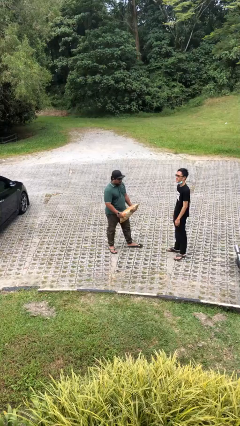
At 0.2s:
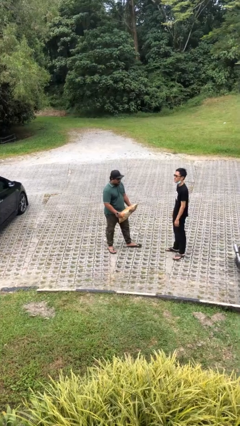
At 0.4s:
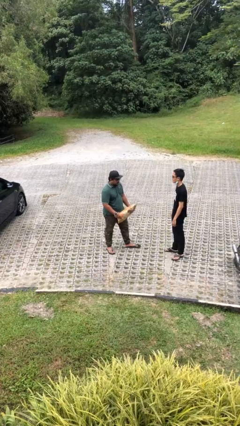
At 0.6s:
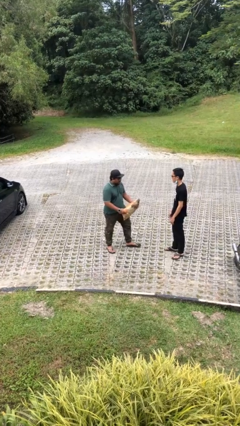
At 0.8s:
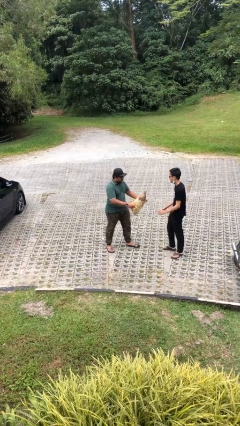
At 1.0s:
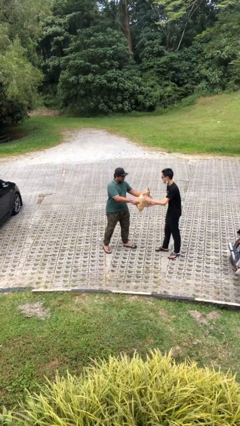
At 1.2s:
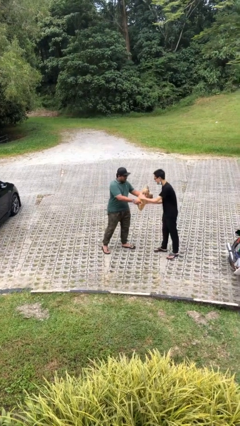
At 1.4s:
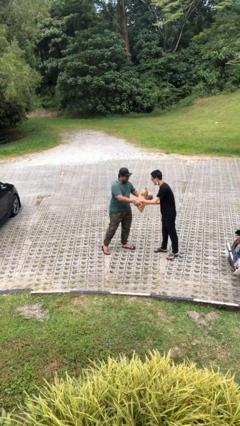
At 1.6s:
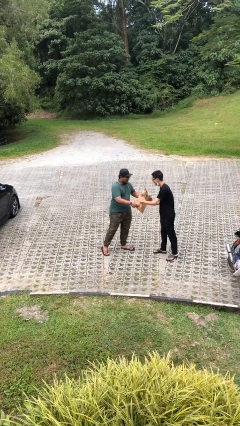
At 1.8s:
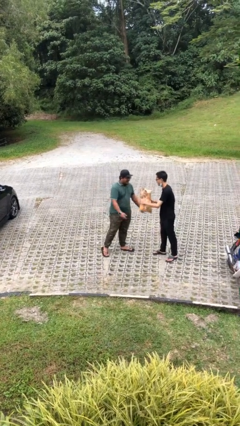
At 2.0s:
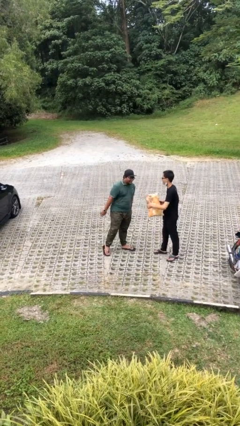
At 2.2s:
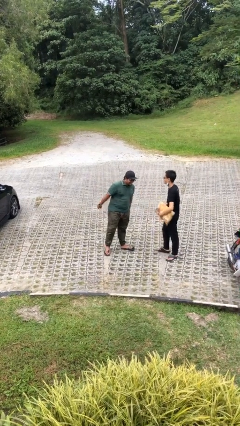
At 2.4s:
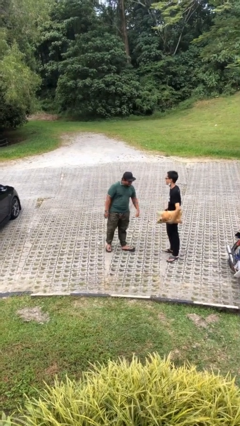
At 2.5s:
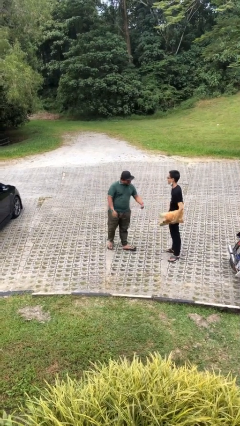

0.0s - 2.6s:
person transfers object to person

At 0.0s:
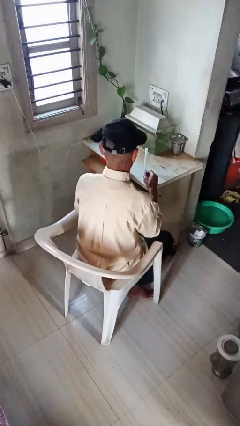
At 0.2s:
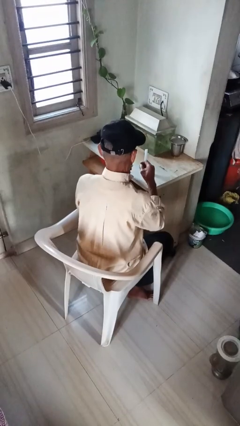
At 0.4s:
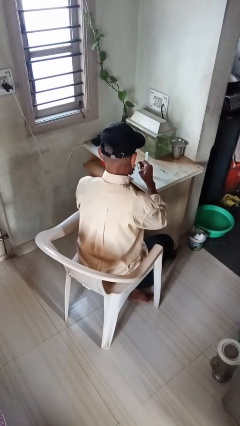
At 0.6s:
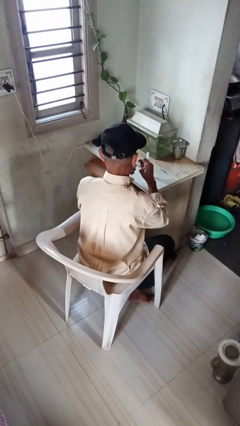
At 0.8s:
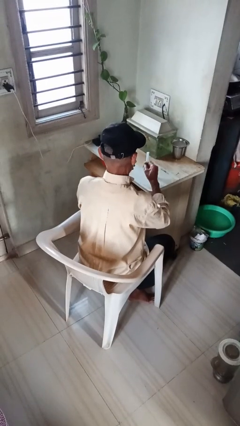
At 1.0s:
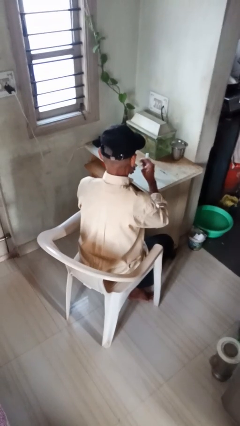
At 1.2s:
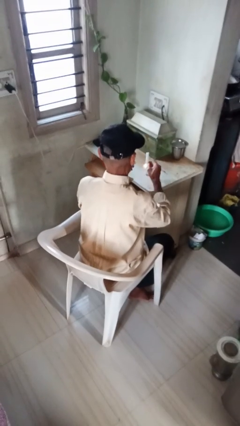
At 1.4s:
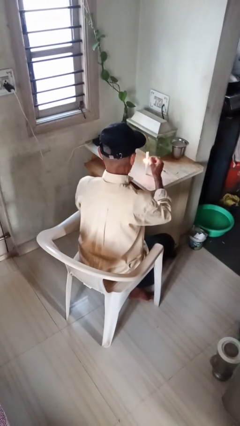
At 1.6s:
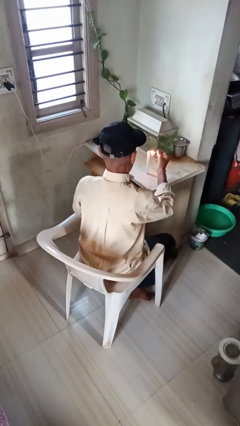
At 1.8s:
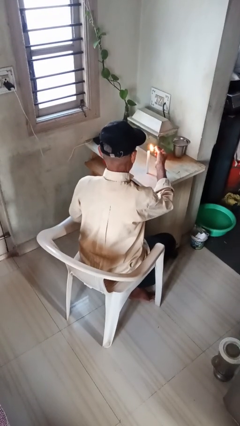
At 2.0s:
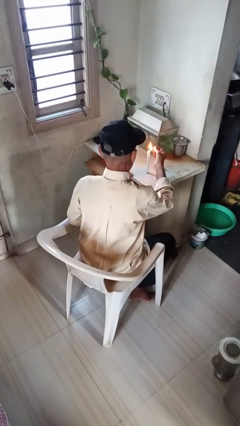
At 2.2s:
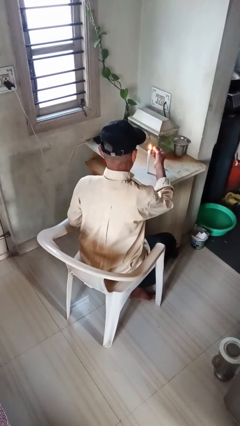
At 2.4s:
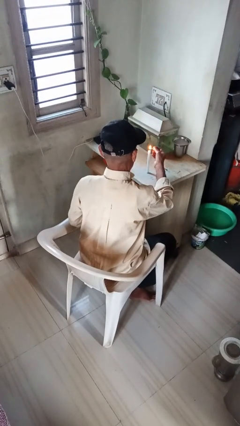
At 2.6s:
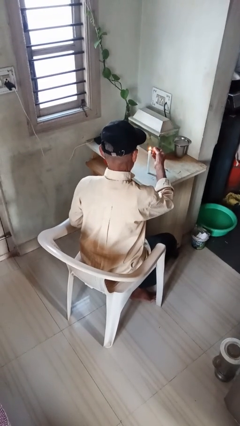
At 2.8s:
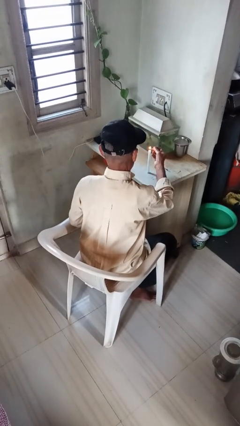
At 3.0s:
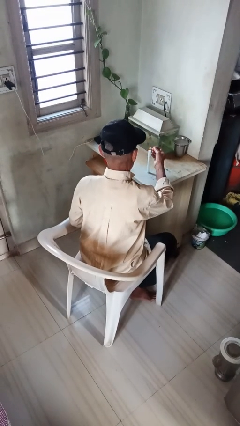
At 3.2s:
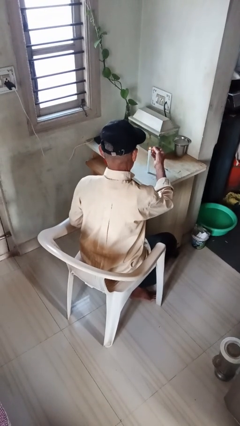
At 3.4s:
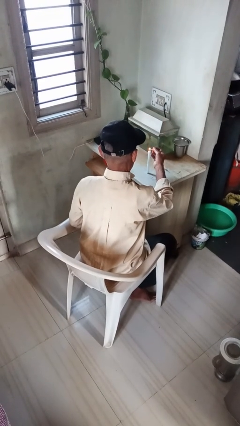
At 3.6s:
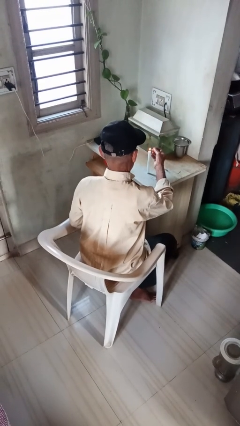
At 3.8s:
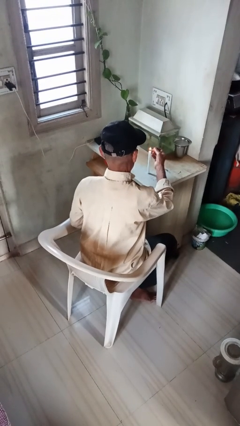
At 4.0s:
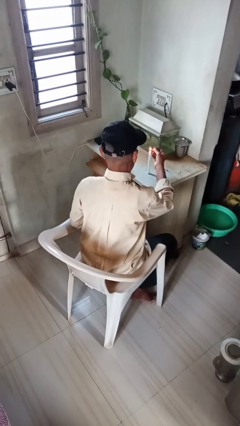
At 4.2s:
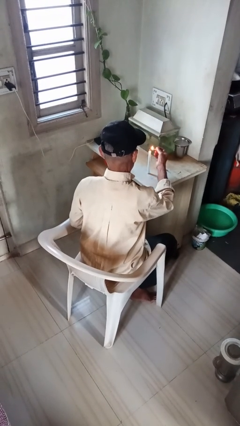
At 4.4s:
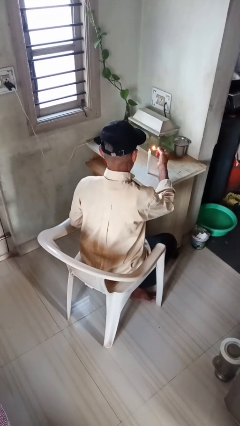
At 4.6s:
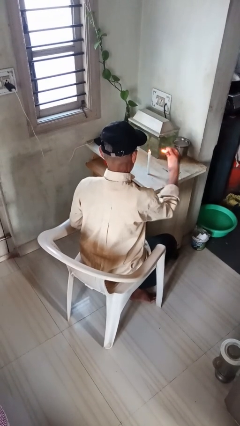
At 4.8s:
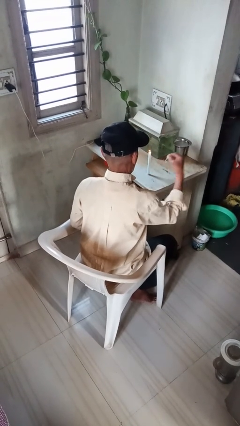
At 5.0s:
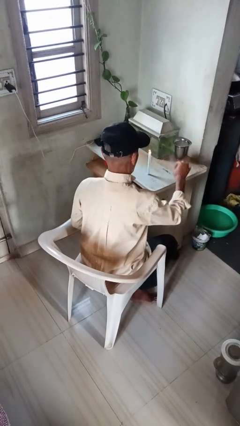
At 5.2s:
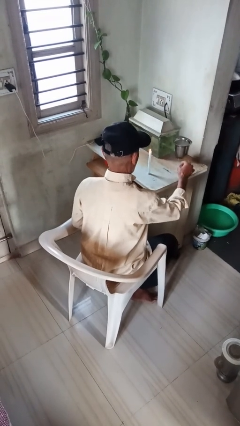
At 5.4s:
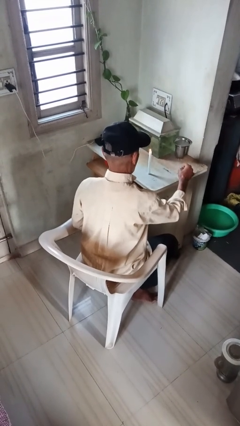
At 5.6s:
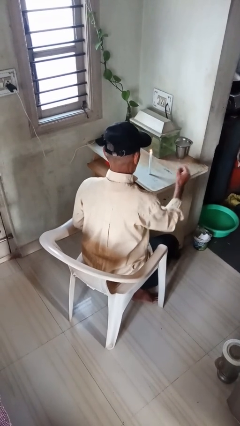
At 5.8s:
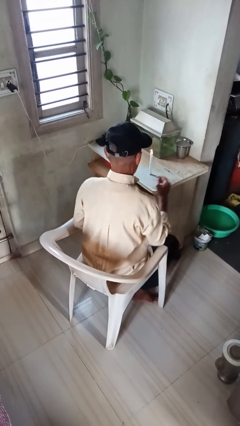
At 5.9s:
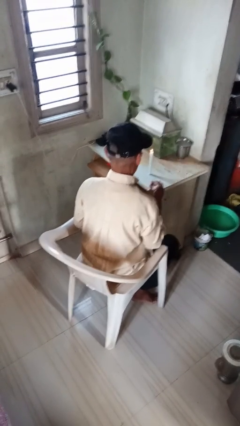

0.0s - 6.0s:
person lights candle

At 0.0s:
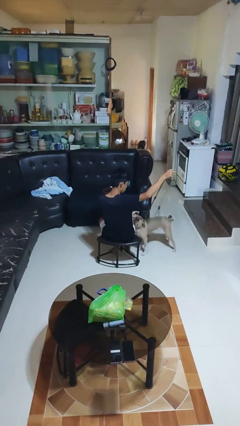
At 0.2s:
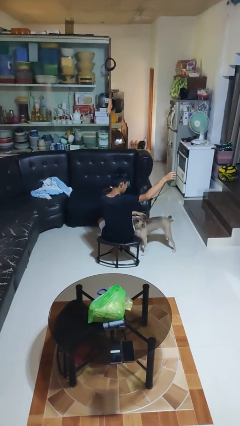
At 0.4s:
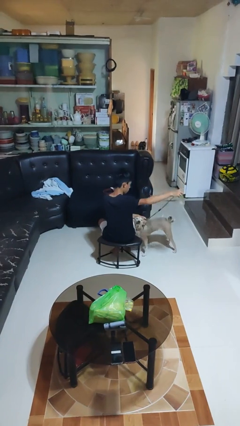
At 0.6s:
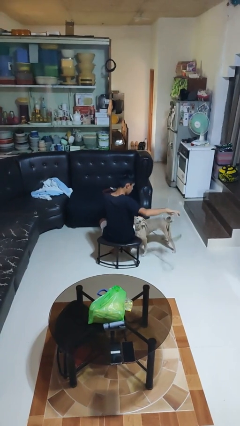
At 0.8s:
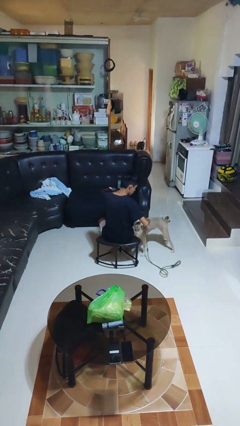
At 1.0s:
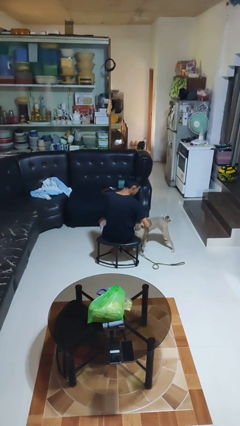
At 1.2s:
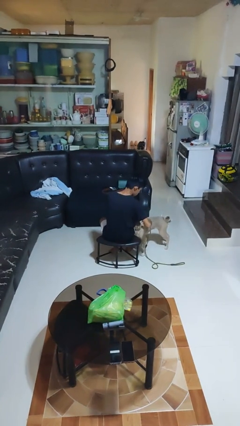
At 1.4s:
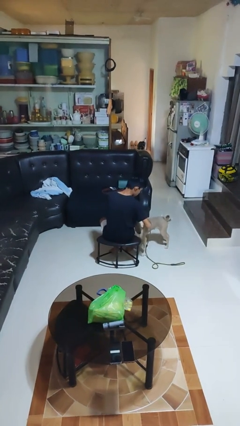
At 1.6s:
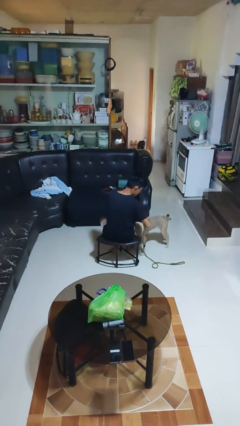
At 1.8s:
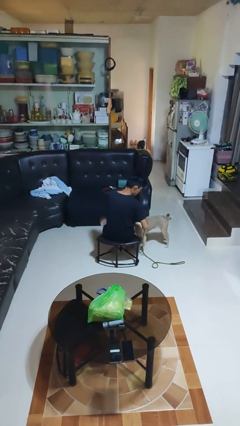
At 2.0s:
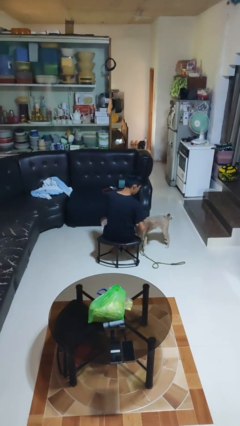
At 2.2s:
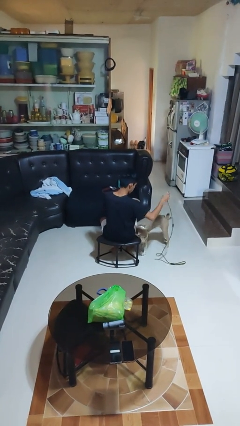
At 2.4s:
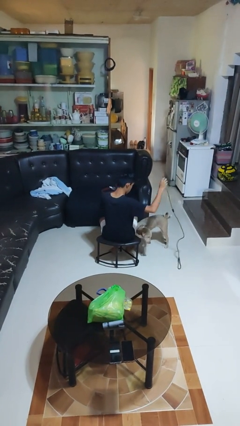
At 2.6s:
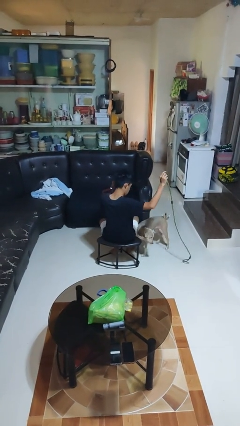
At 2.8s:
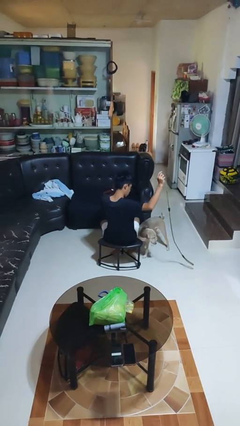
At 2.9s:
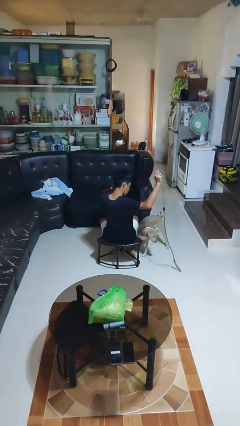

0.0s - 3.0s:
person unattaches leash from dog

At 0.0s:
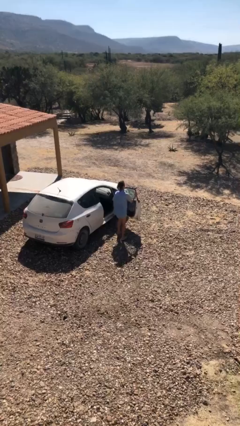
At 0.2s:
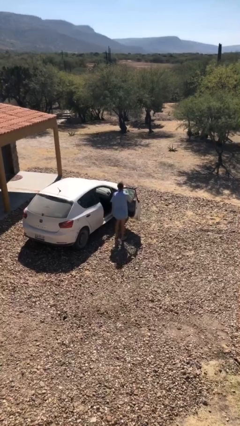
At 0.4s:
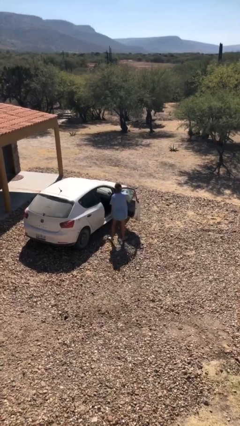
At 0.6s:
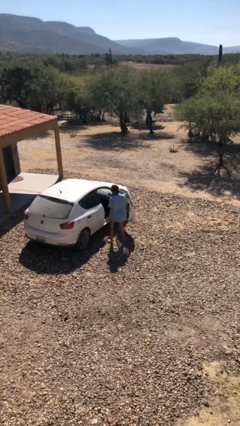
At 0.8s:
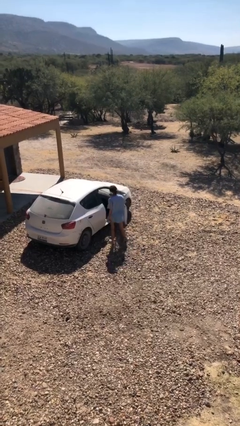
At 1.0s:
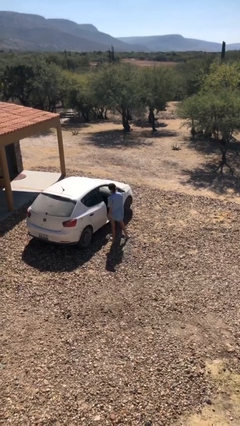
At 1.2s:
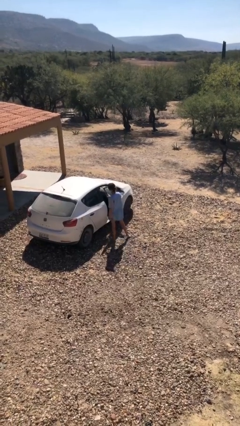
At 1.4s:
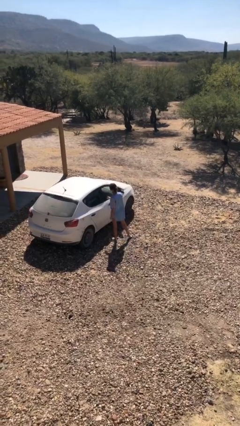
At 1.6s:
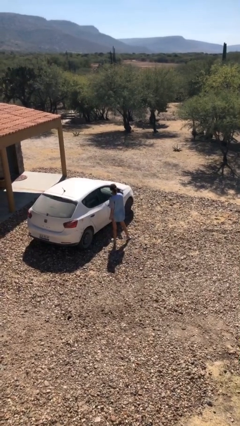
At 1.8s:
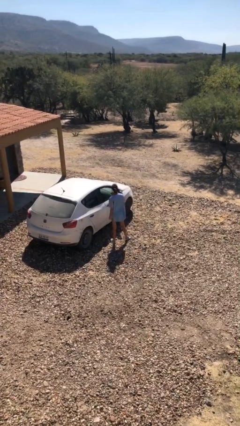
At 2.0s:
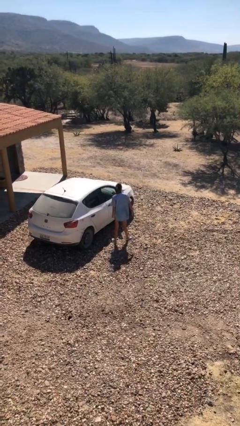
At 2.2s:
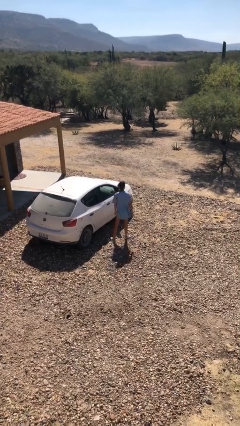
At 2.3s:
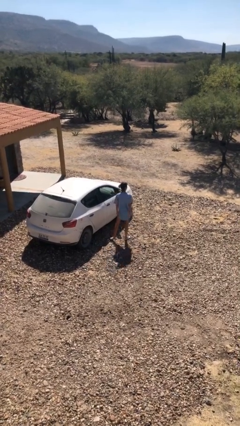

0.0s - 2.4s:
person closes car door

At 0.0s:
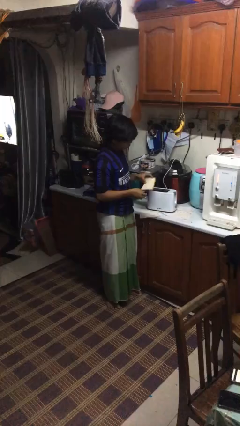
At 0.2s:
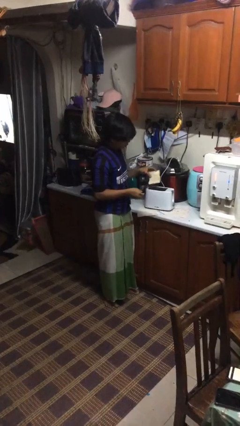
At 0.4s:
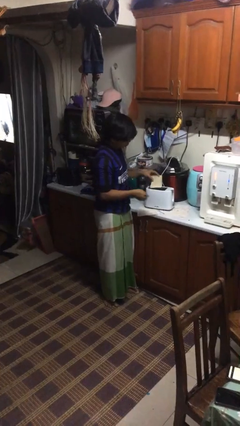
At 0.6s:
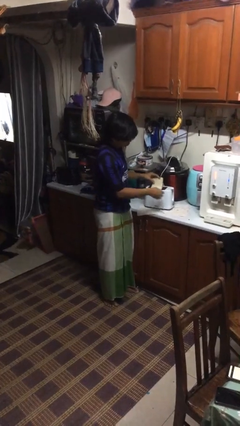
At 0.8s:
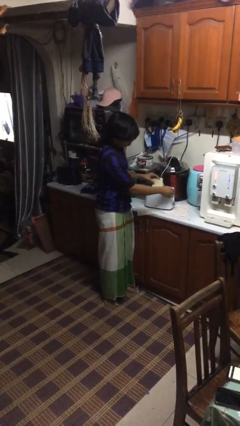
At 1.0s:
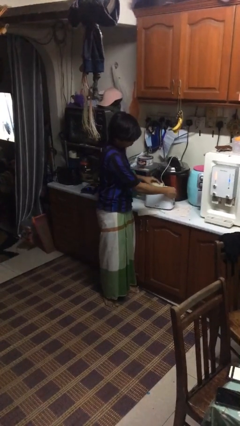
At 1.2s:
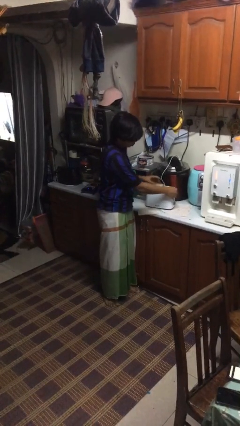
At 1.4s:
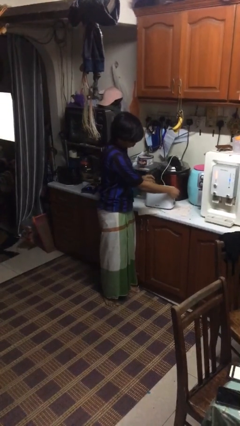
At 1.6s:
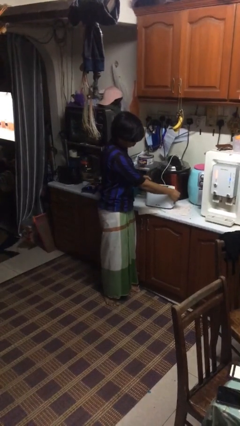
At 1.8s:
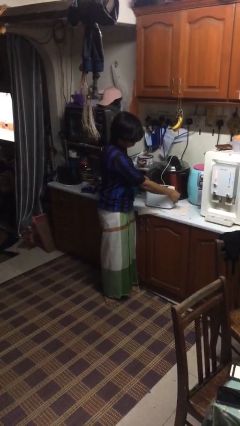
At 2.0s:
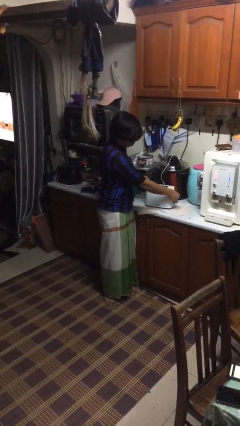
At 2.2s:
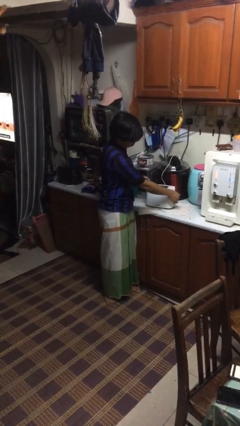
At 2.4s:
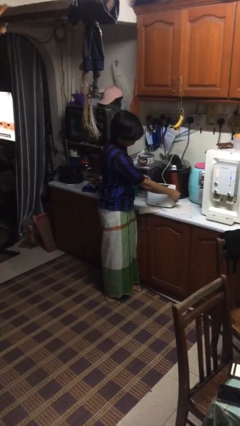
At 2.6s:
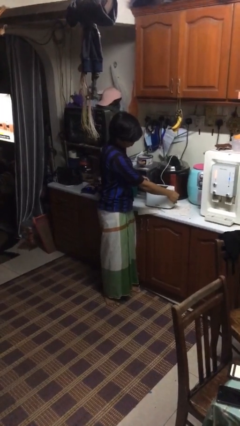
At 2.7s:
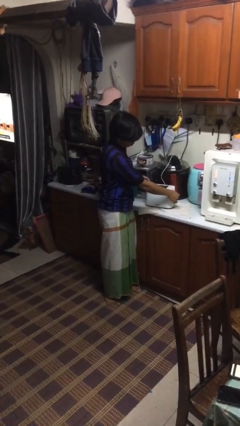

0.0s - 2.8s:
person puts object into toaster

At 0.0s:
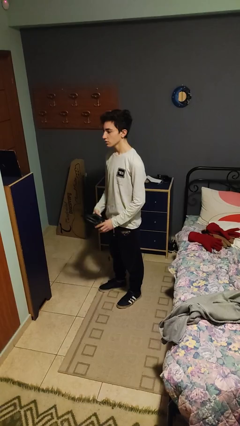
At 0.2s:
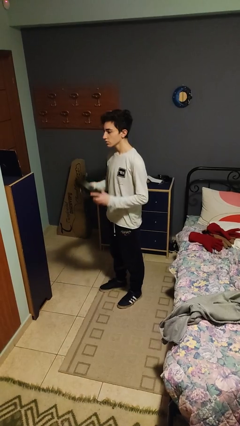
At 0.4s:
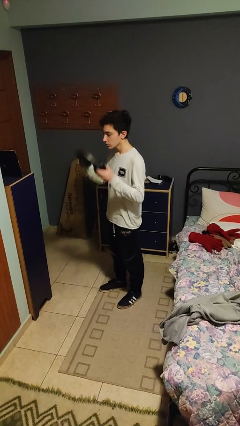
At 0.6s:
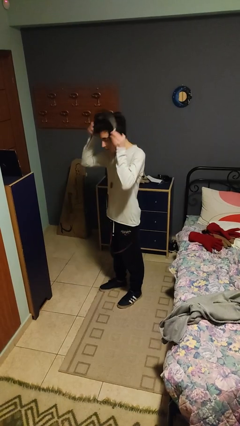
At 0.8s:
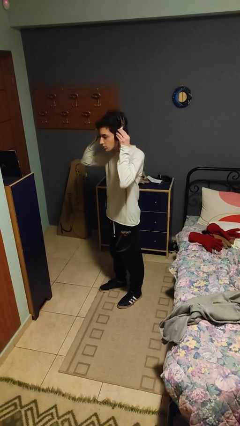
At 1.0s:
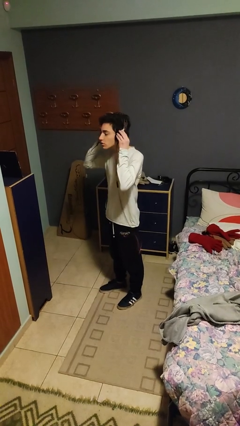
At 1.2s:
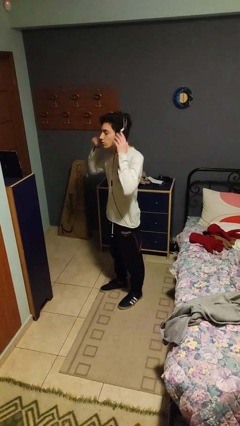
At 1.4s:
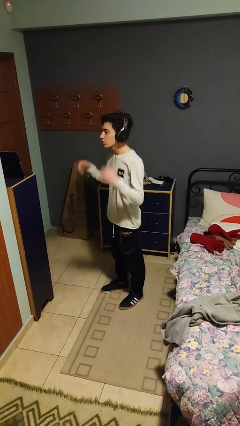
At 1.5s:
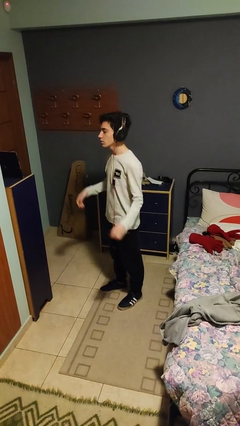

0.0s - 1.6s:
person puts on headphones
